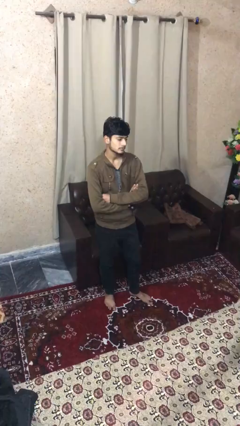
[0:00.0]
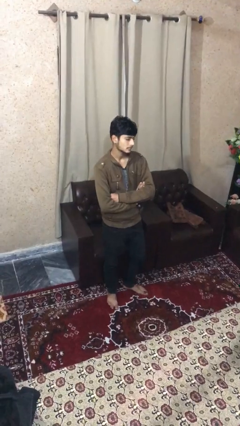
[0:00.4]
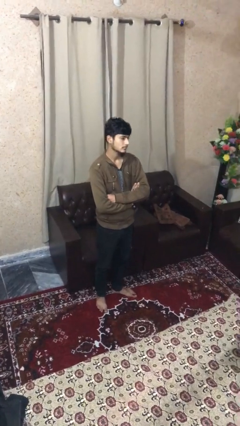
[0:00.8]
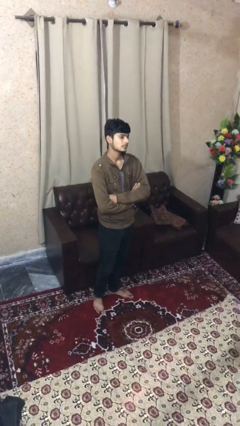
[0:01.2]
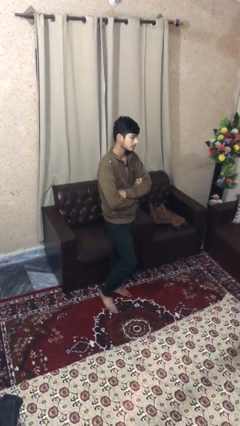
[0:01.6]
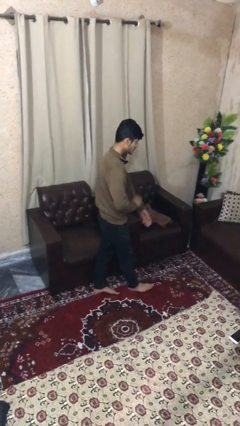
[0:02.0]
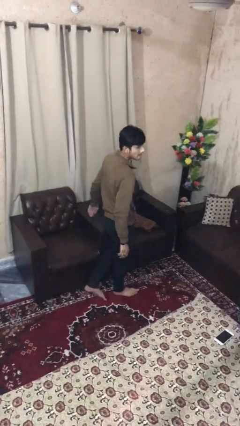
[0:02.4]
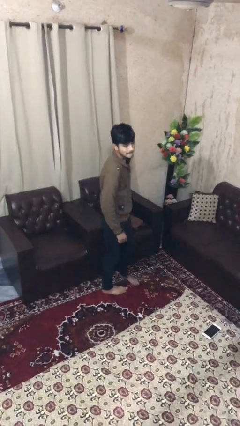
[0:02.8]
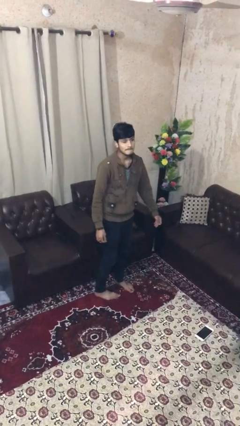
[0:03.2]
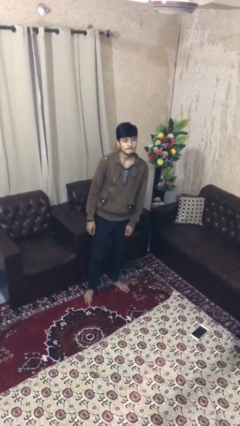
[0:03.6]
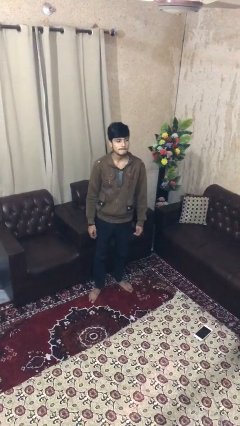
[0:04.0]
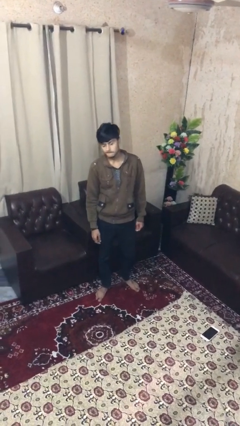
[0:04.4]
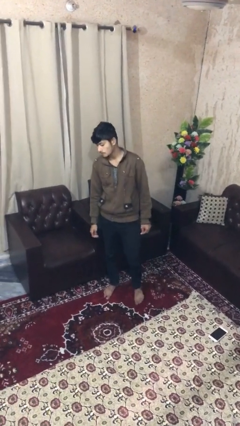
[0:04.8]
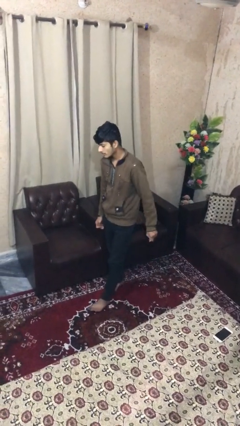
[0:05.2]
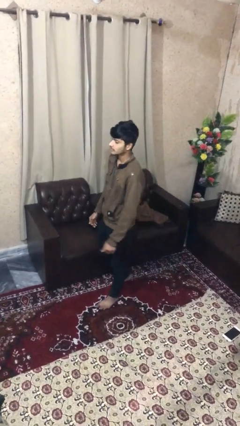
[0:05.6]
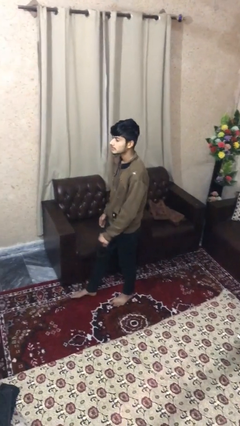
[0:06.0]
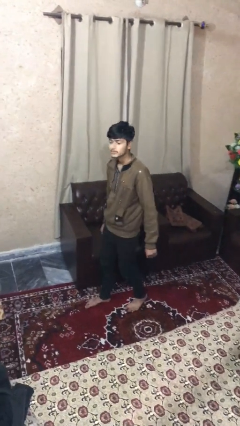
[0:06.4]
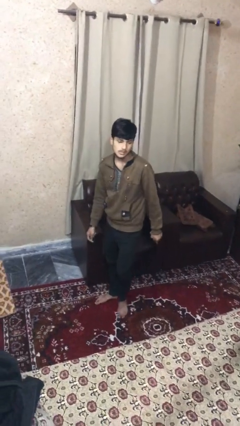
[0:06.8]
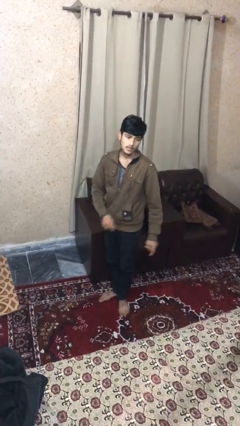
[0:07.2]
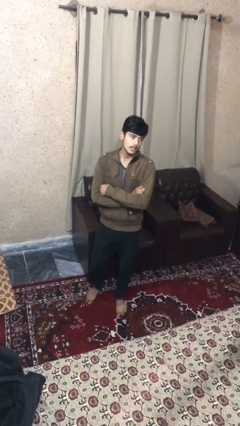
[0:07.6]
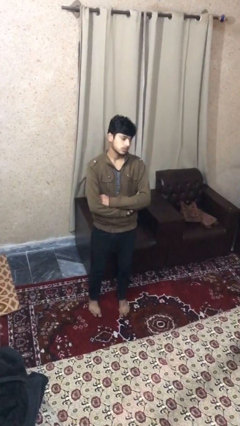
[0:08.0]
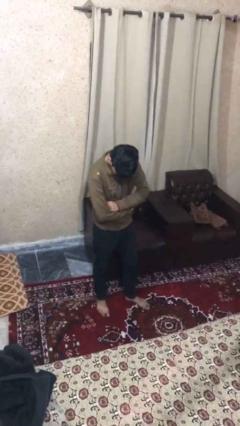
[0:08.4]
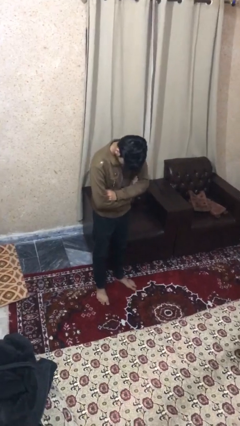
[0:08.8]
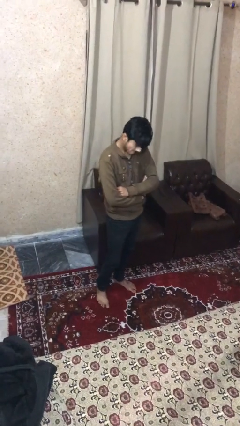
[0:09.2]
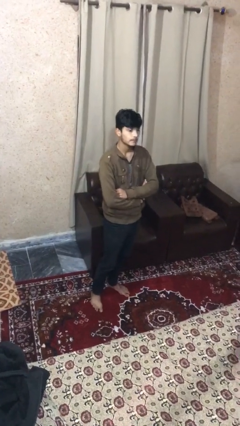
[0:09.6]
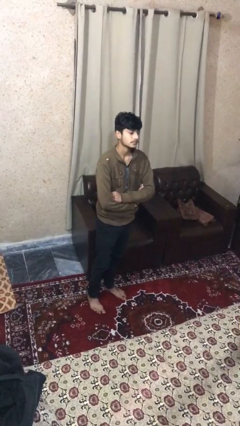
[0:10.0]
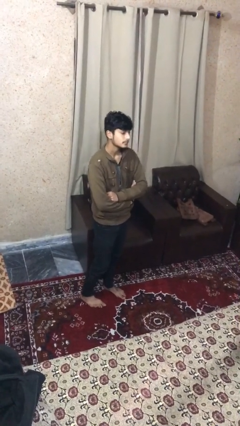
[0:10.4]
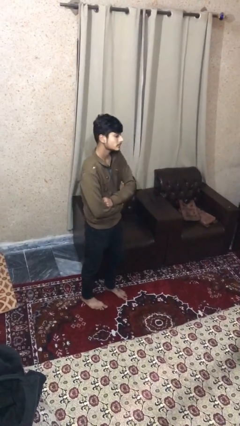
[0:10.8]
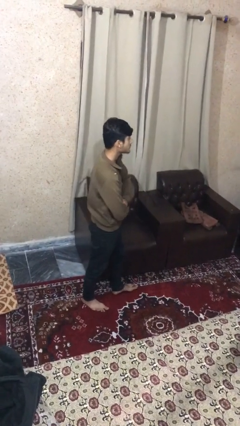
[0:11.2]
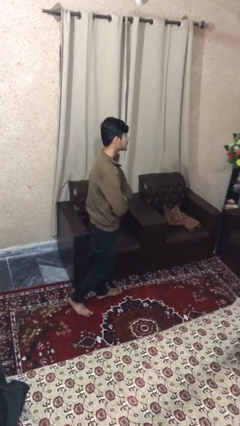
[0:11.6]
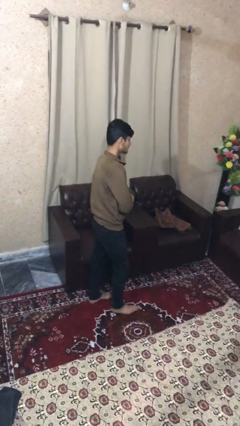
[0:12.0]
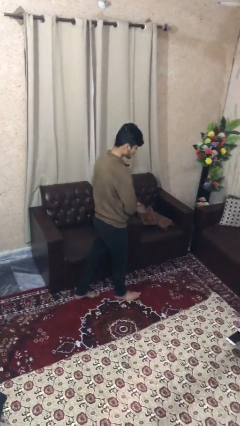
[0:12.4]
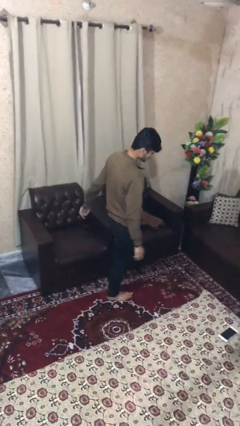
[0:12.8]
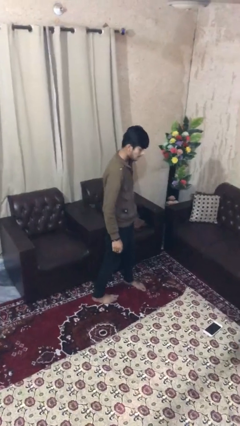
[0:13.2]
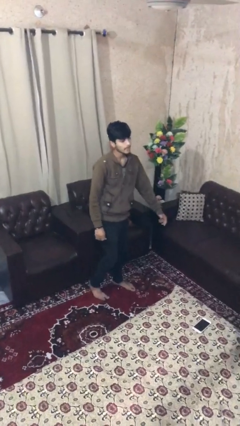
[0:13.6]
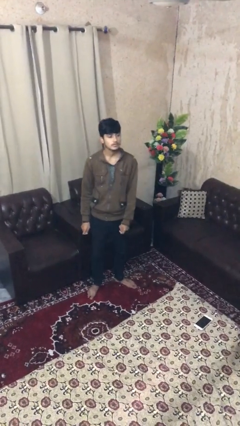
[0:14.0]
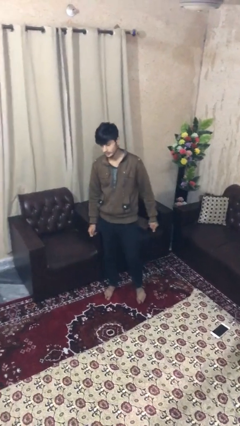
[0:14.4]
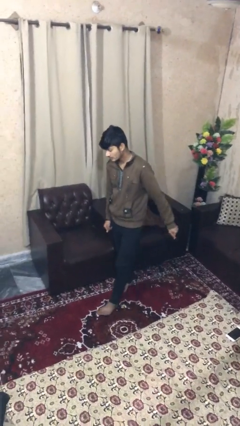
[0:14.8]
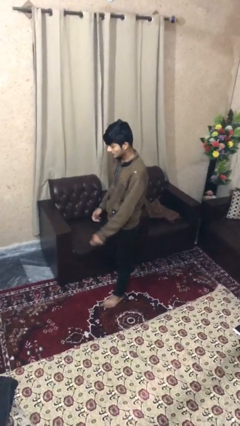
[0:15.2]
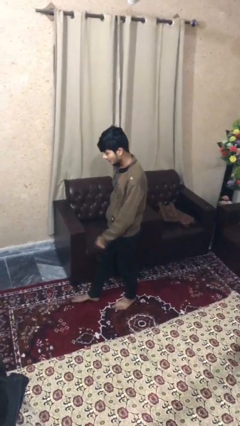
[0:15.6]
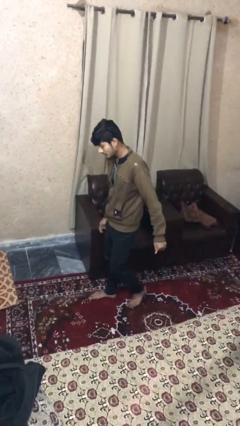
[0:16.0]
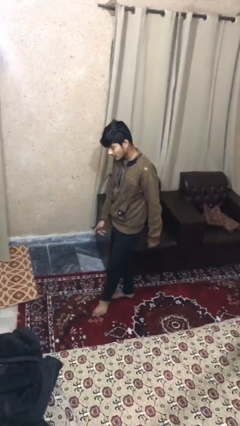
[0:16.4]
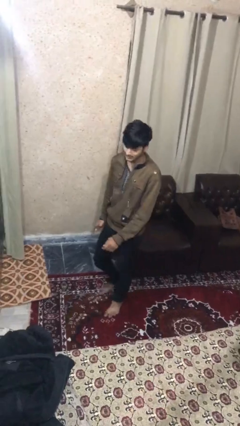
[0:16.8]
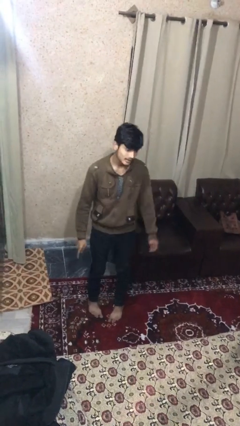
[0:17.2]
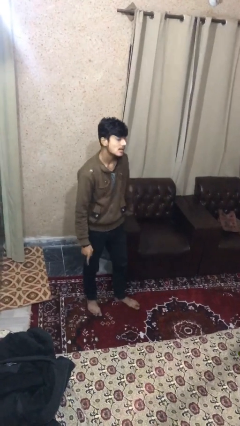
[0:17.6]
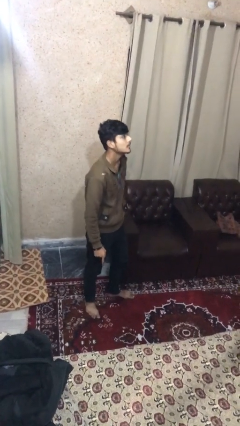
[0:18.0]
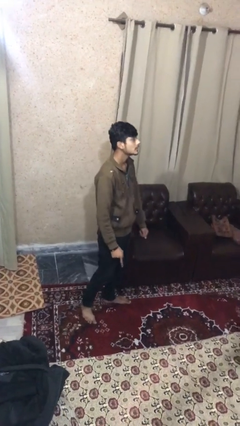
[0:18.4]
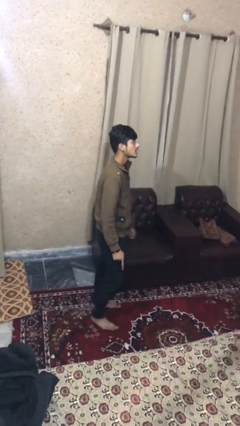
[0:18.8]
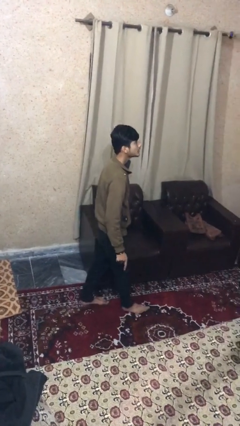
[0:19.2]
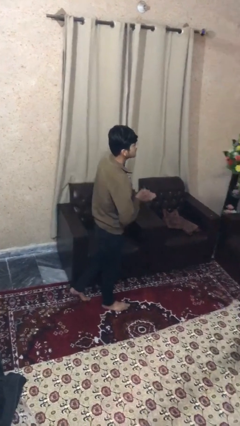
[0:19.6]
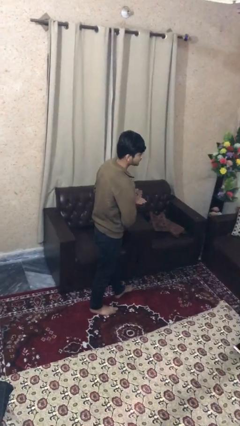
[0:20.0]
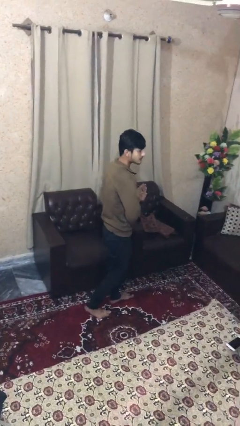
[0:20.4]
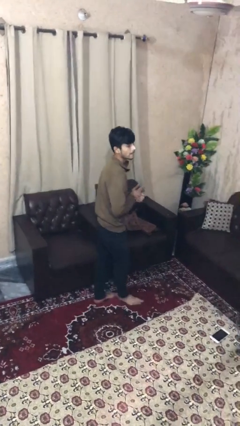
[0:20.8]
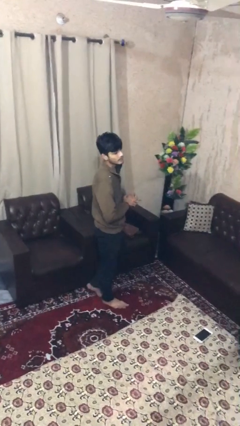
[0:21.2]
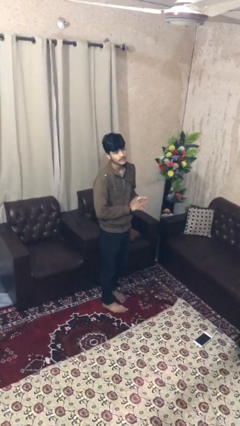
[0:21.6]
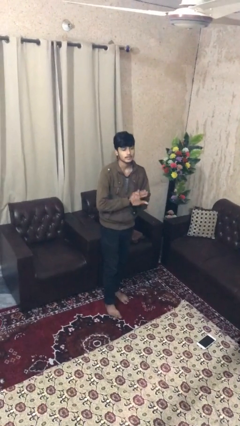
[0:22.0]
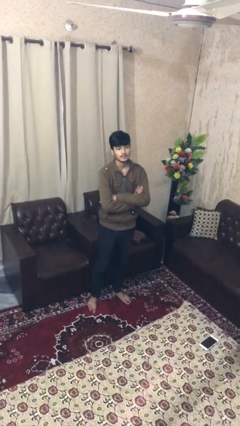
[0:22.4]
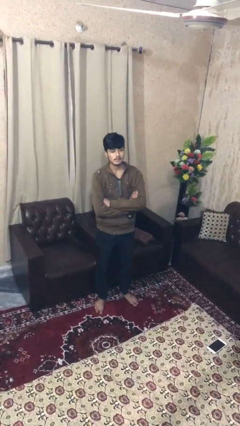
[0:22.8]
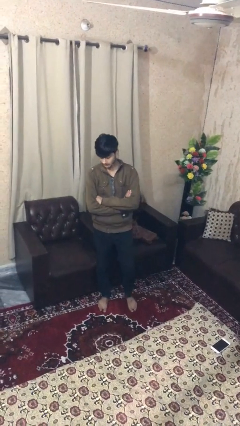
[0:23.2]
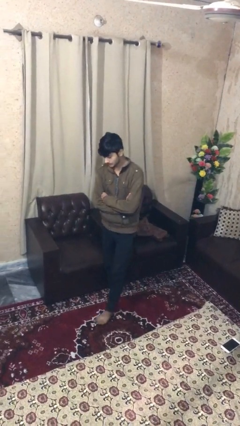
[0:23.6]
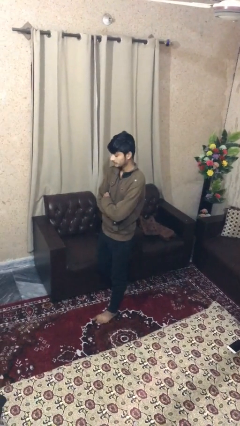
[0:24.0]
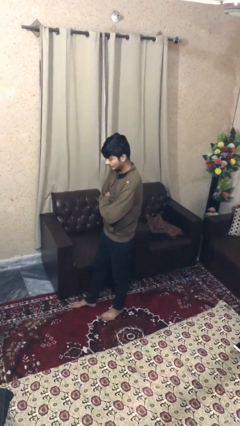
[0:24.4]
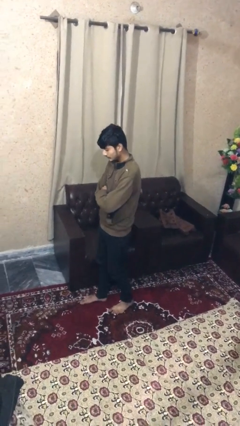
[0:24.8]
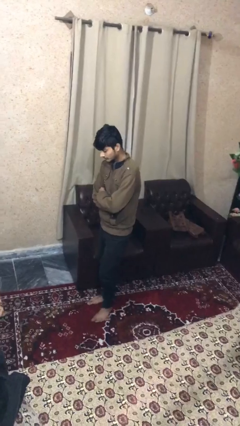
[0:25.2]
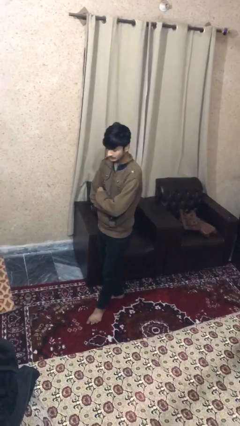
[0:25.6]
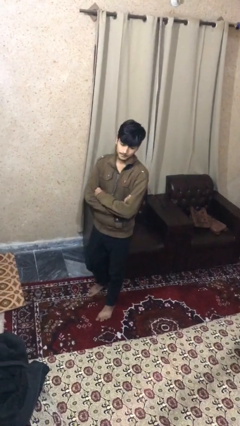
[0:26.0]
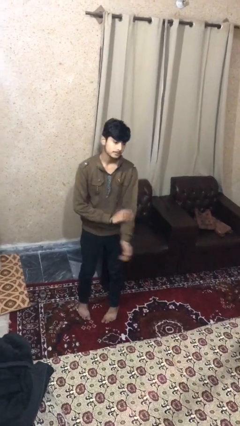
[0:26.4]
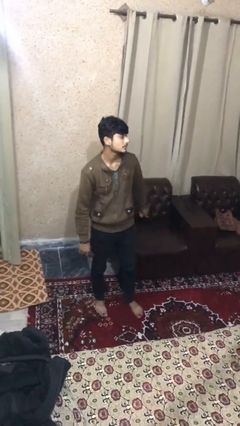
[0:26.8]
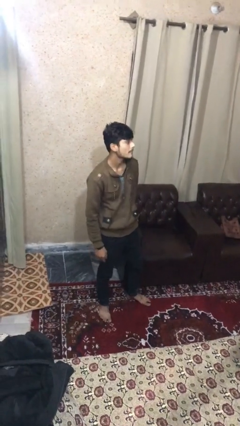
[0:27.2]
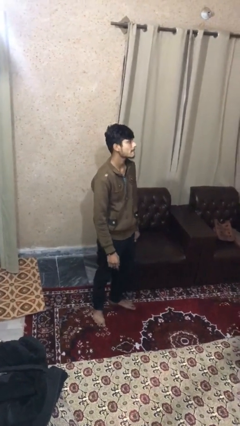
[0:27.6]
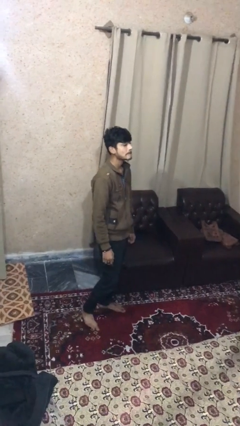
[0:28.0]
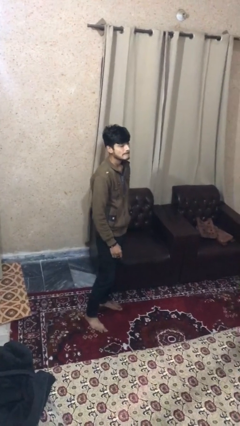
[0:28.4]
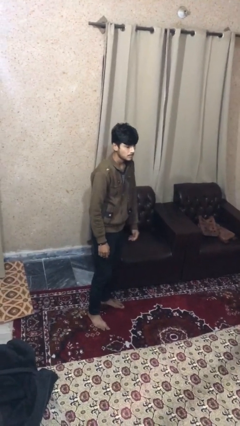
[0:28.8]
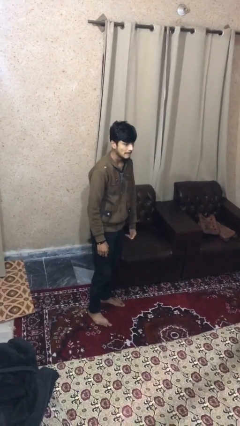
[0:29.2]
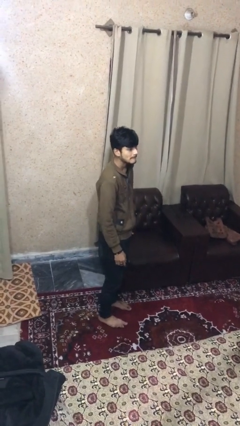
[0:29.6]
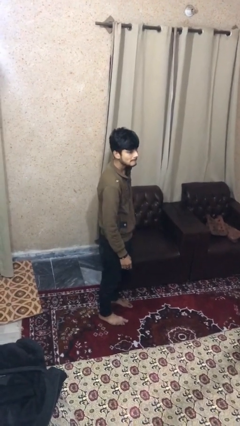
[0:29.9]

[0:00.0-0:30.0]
person walks

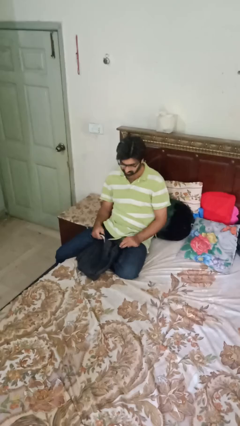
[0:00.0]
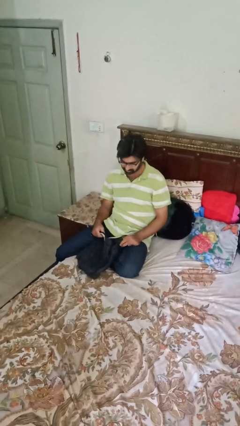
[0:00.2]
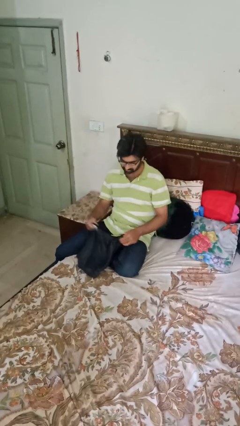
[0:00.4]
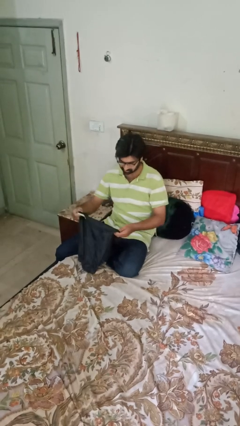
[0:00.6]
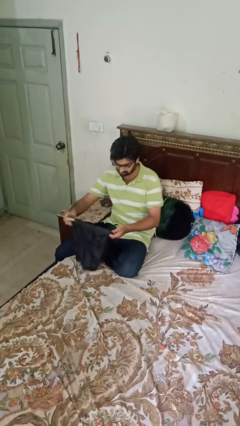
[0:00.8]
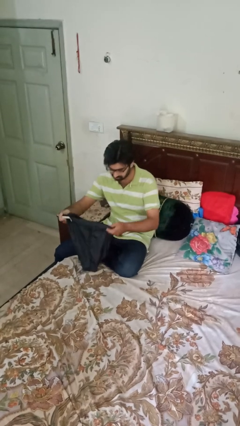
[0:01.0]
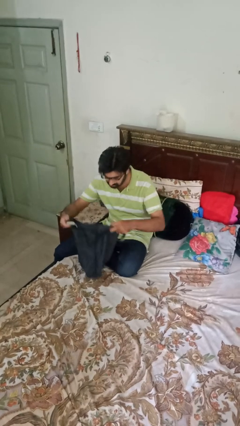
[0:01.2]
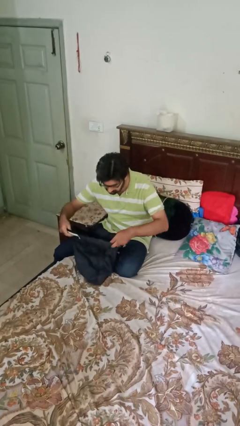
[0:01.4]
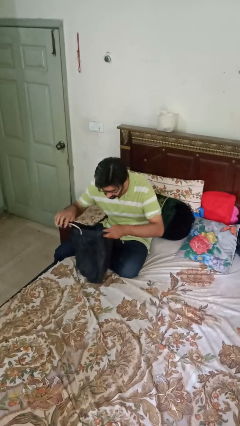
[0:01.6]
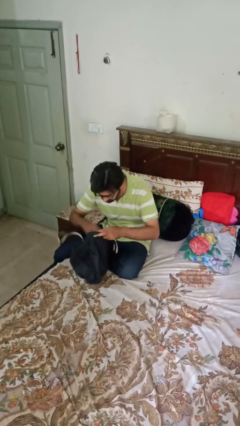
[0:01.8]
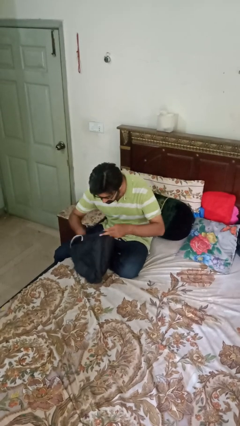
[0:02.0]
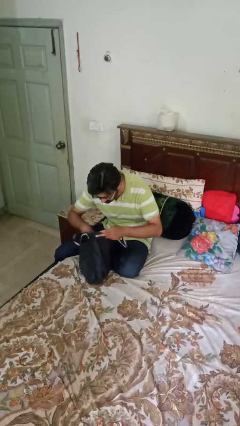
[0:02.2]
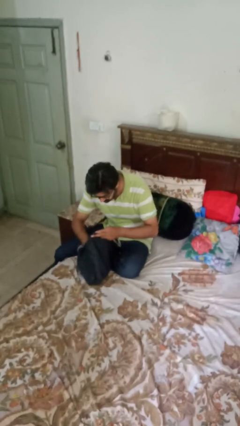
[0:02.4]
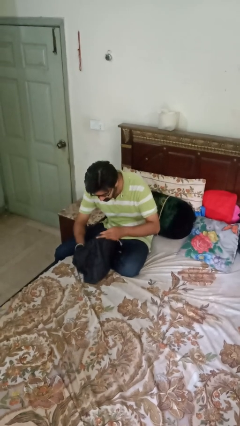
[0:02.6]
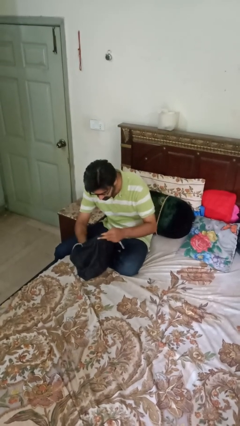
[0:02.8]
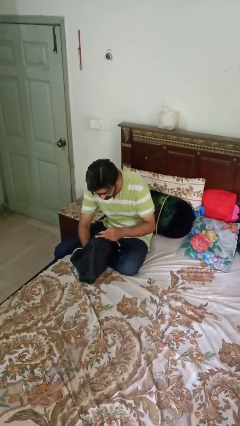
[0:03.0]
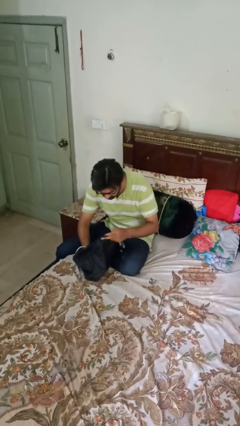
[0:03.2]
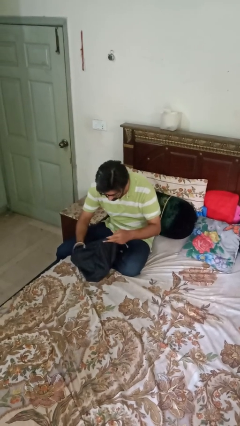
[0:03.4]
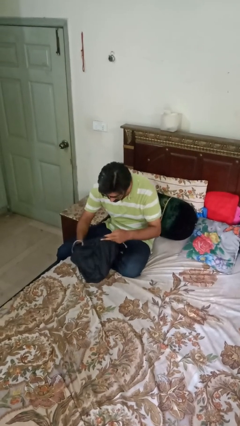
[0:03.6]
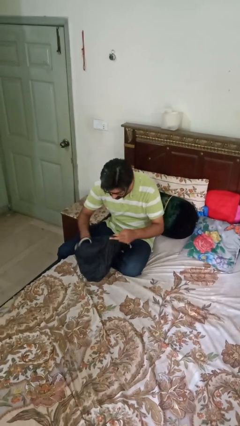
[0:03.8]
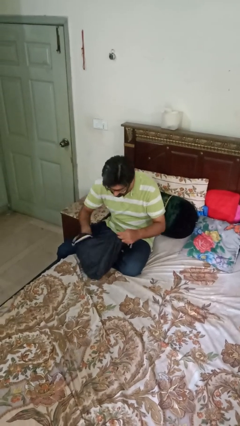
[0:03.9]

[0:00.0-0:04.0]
person searches in bag
